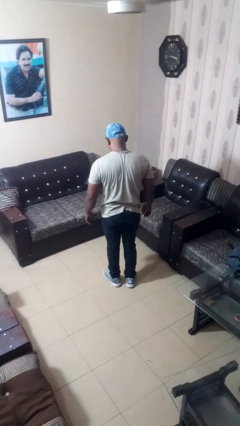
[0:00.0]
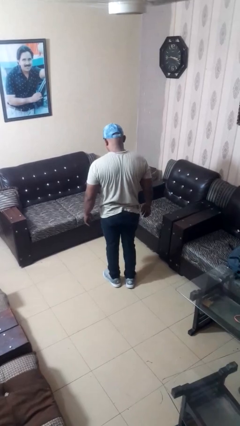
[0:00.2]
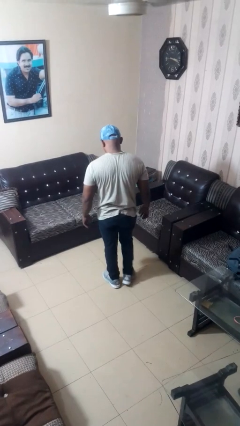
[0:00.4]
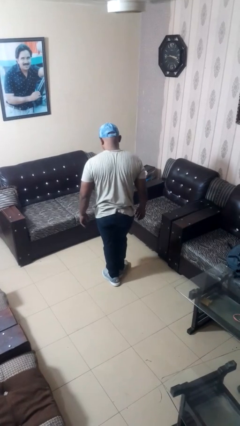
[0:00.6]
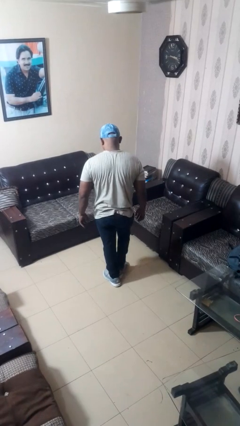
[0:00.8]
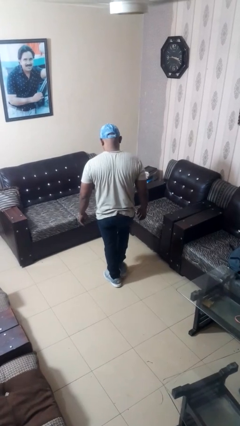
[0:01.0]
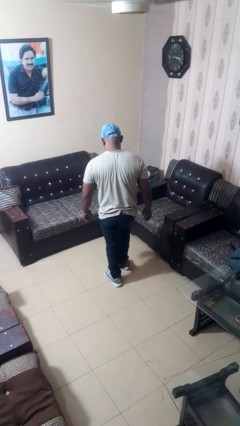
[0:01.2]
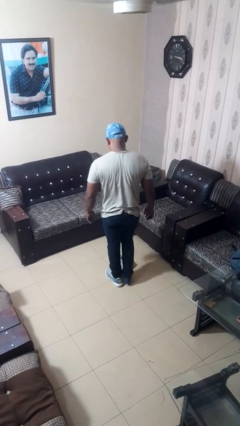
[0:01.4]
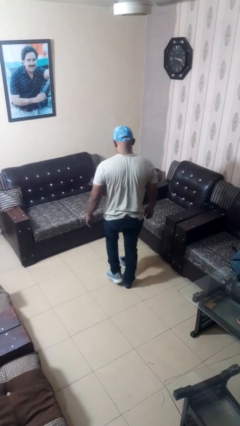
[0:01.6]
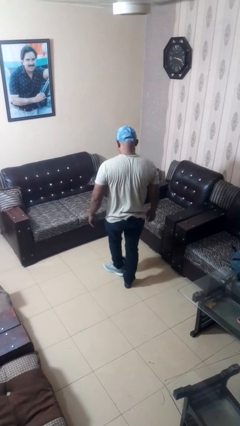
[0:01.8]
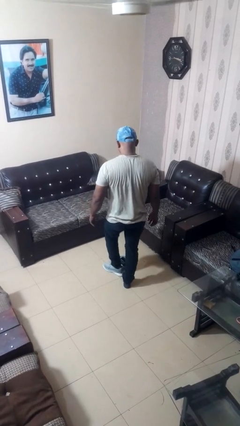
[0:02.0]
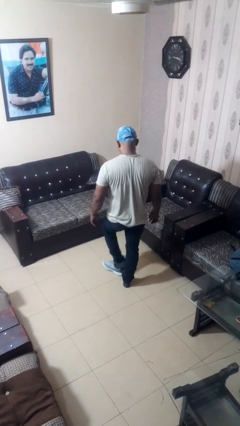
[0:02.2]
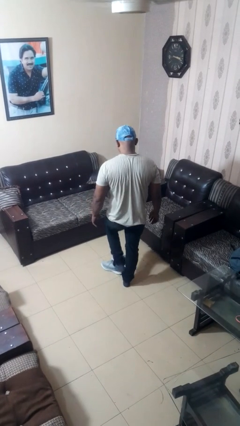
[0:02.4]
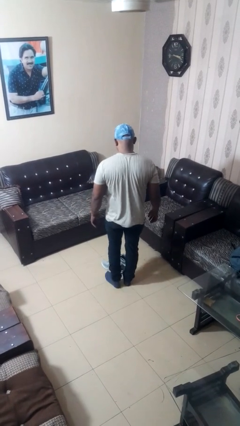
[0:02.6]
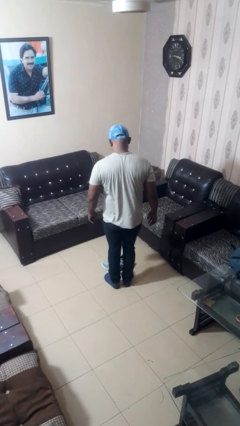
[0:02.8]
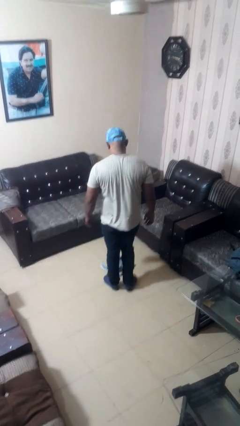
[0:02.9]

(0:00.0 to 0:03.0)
person takes off shoes

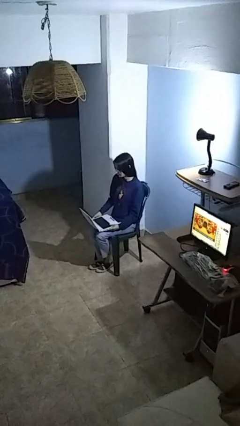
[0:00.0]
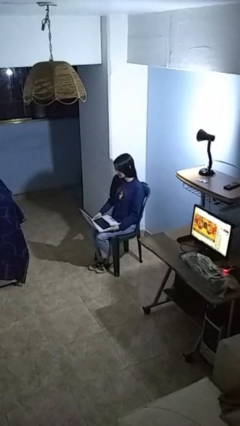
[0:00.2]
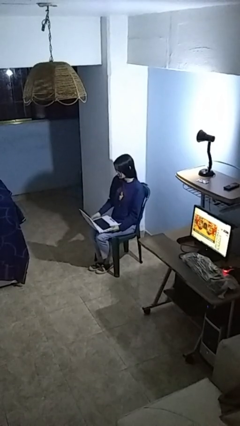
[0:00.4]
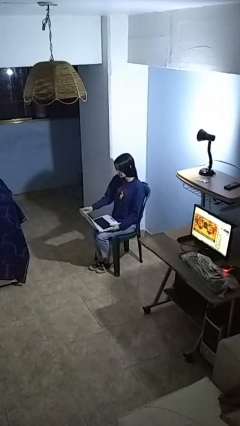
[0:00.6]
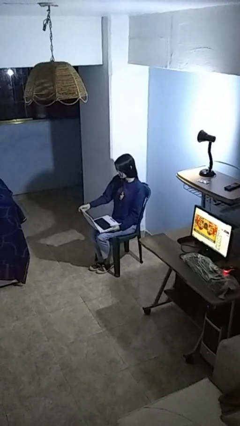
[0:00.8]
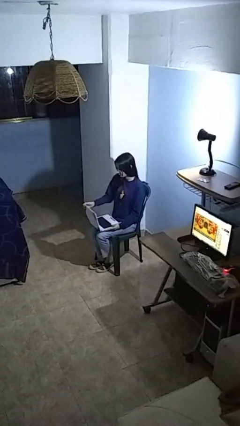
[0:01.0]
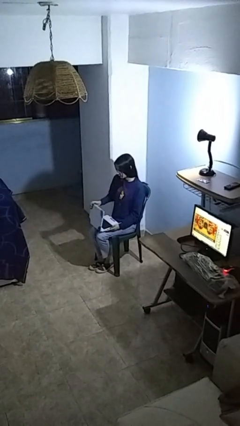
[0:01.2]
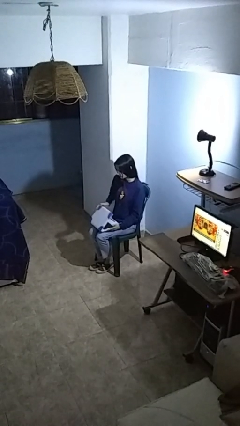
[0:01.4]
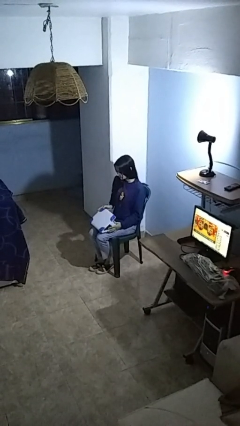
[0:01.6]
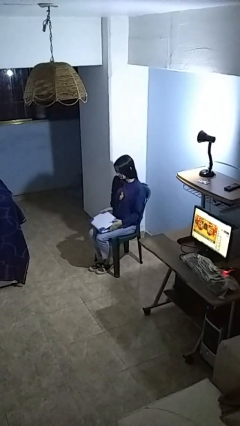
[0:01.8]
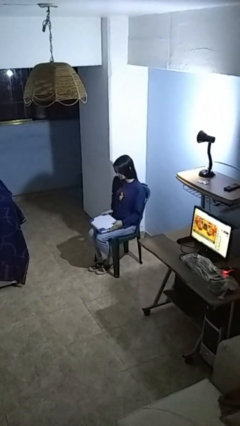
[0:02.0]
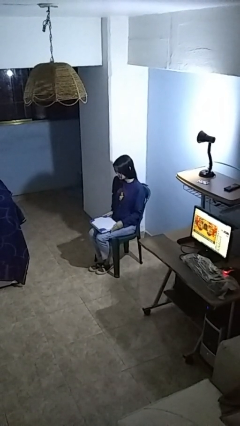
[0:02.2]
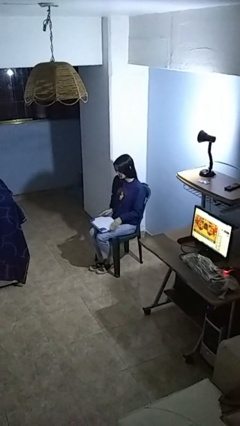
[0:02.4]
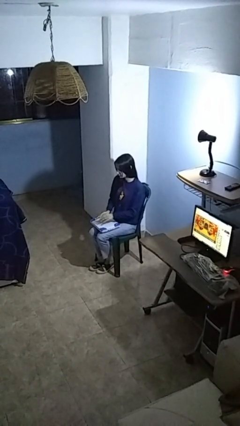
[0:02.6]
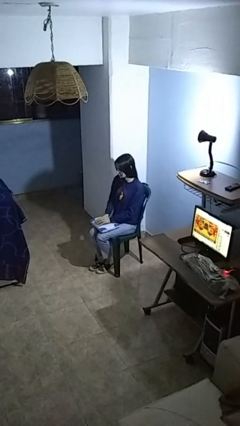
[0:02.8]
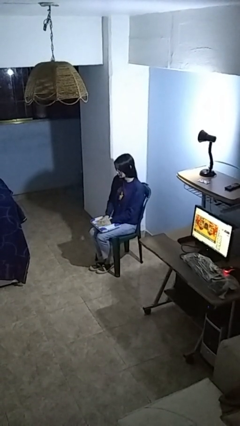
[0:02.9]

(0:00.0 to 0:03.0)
person closes laptop

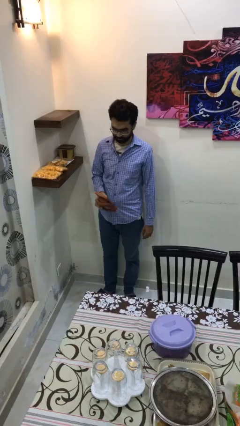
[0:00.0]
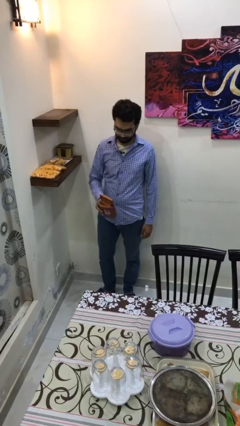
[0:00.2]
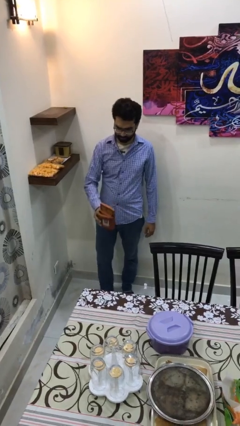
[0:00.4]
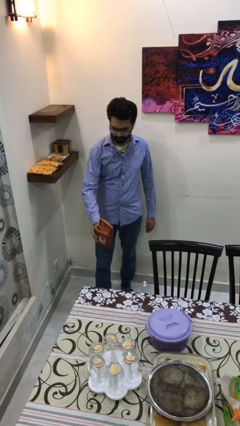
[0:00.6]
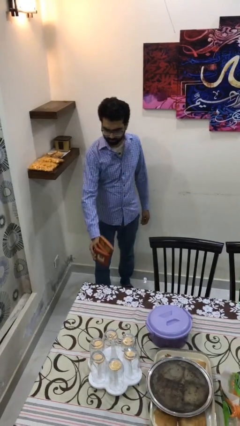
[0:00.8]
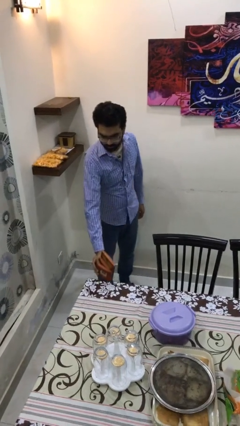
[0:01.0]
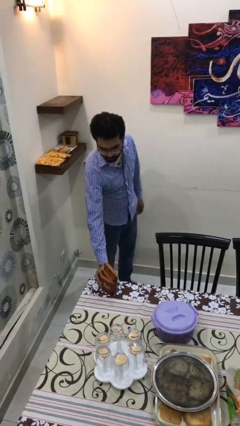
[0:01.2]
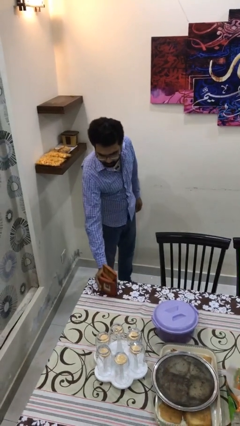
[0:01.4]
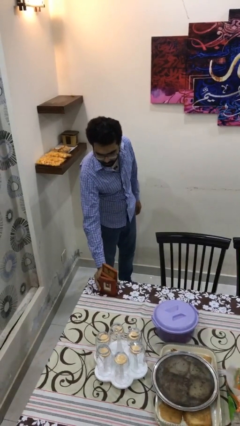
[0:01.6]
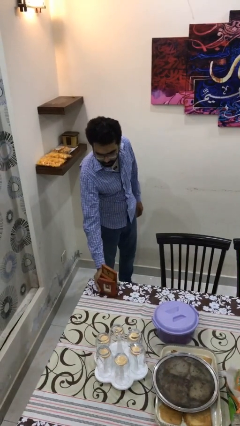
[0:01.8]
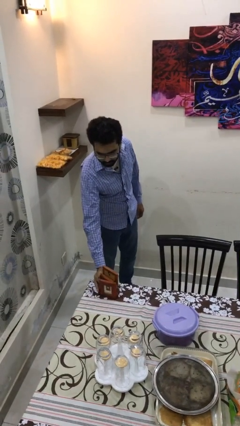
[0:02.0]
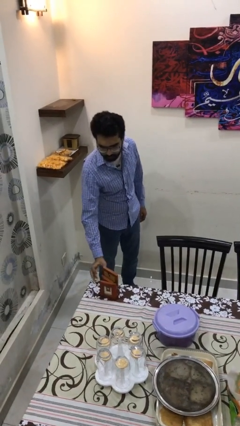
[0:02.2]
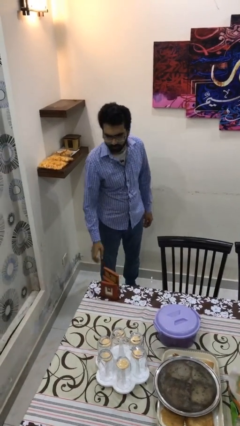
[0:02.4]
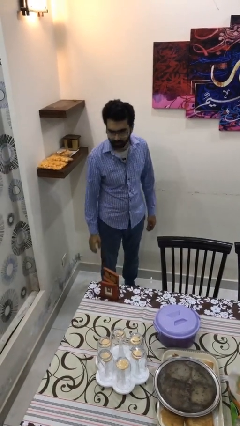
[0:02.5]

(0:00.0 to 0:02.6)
person puts down object on table

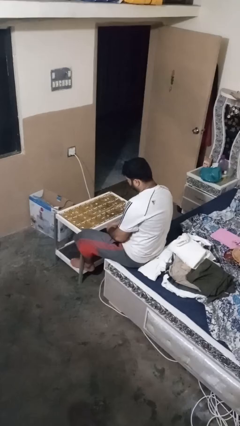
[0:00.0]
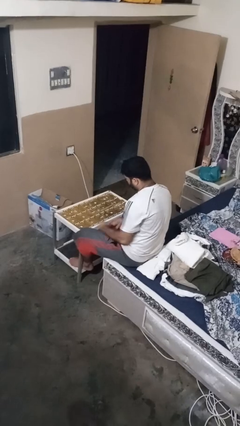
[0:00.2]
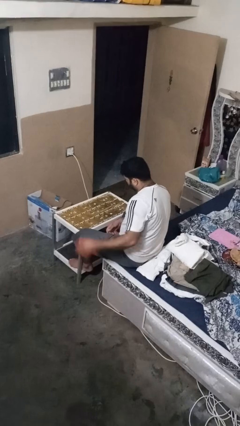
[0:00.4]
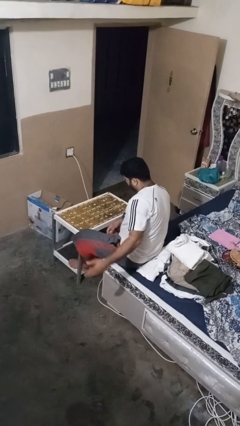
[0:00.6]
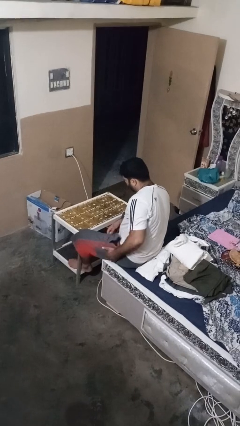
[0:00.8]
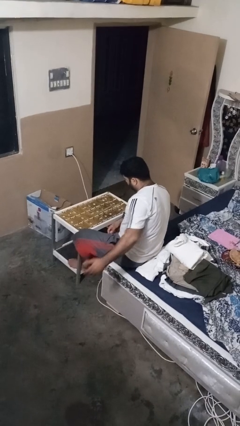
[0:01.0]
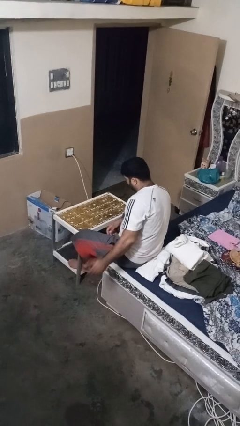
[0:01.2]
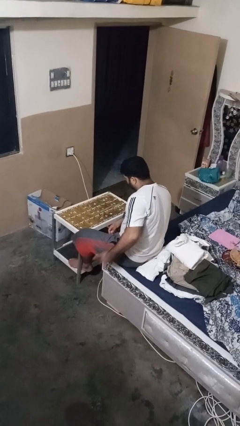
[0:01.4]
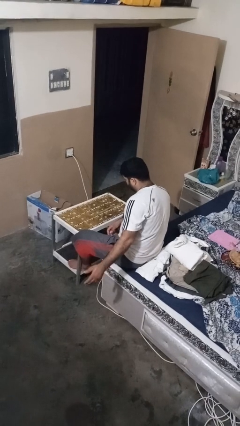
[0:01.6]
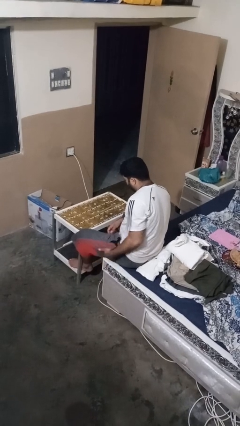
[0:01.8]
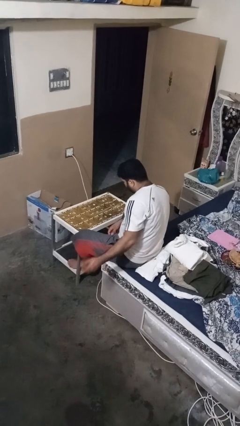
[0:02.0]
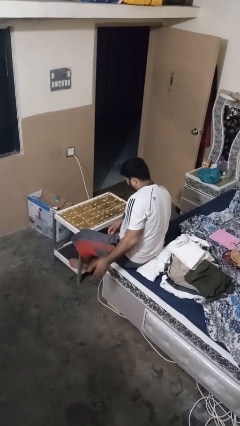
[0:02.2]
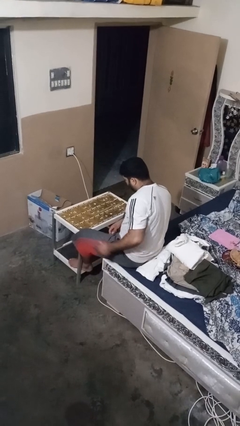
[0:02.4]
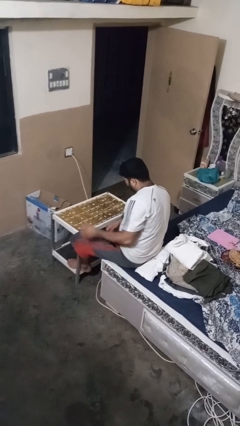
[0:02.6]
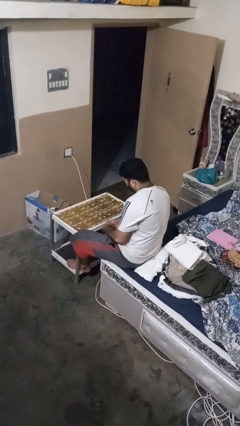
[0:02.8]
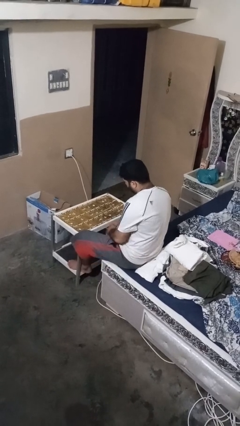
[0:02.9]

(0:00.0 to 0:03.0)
person slaps hands on thighs

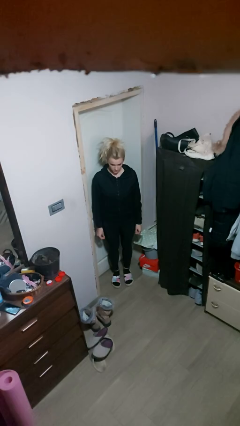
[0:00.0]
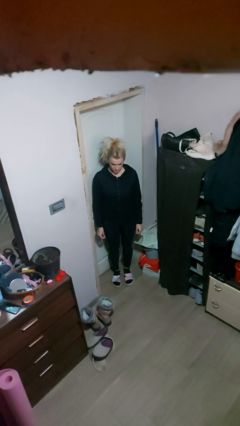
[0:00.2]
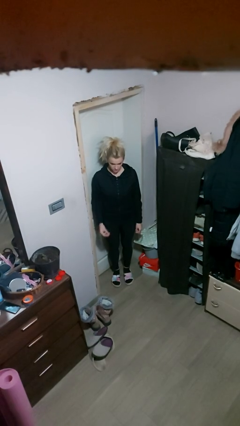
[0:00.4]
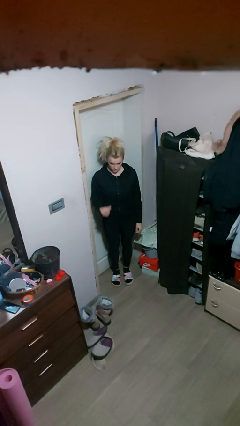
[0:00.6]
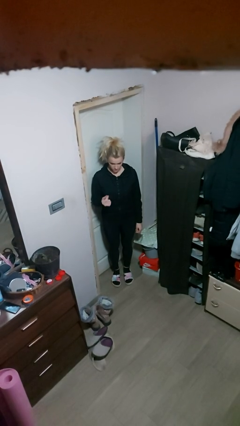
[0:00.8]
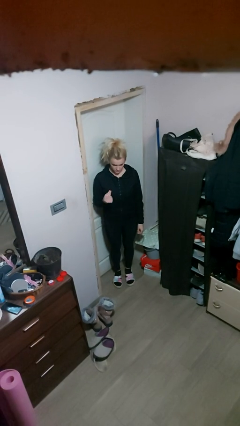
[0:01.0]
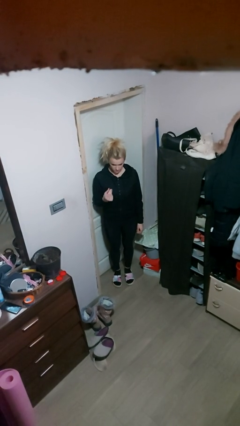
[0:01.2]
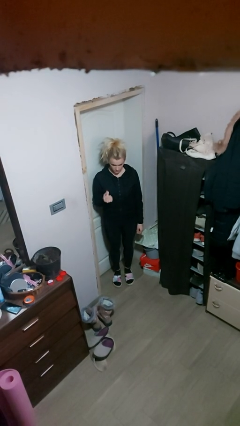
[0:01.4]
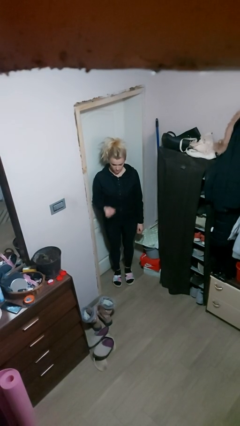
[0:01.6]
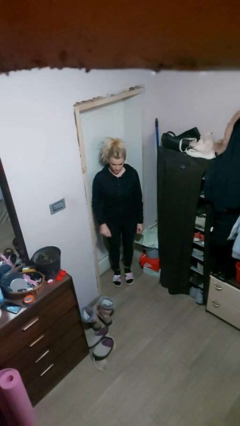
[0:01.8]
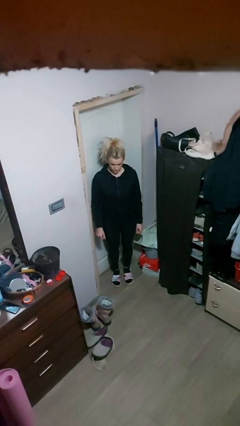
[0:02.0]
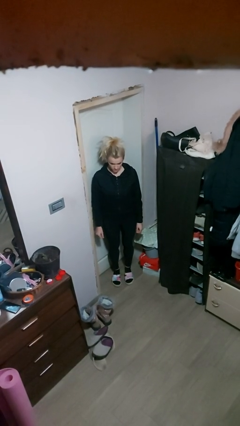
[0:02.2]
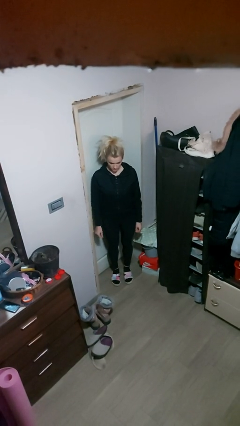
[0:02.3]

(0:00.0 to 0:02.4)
person snaps fingers

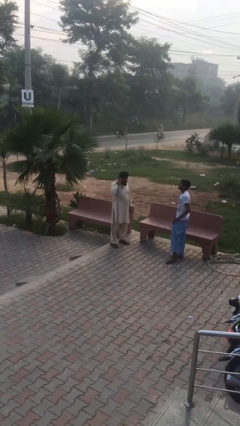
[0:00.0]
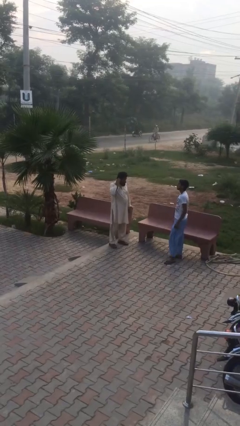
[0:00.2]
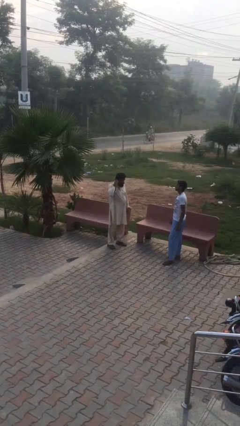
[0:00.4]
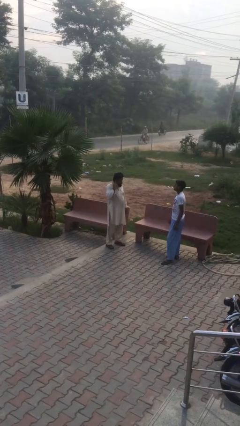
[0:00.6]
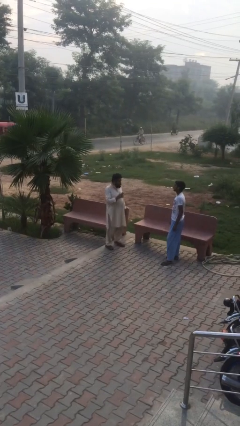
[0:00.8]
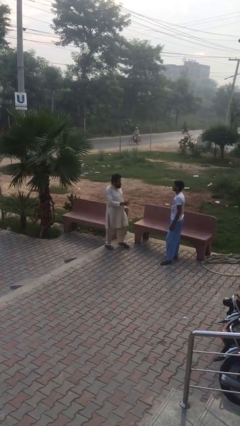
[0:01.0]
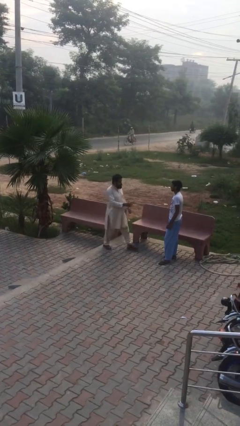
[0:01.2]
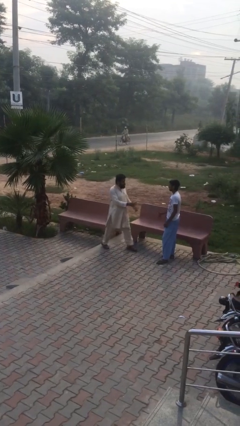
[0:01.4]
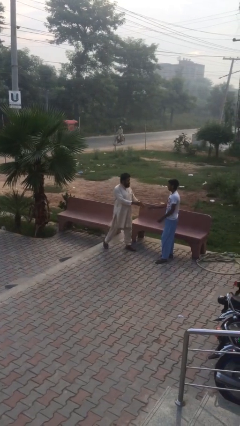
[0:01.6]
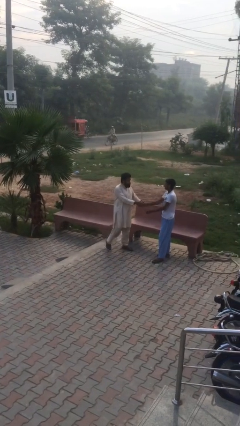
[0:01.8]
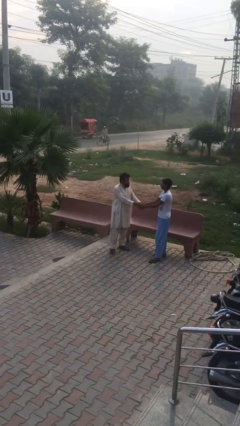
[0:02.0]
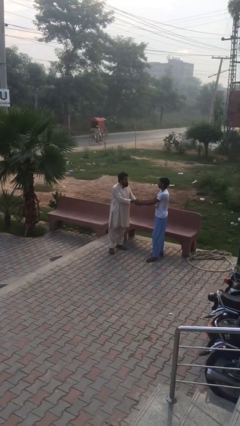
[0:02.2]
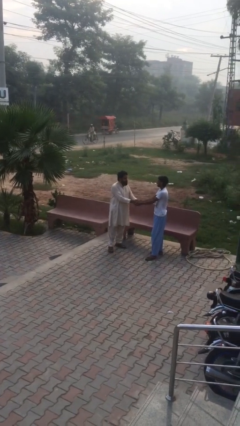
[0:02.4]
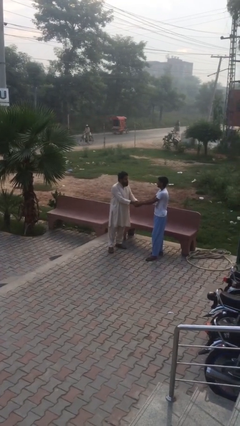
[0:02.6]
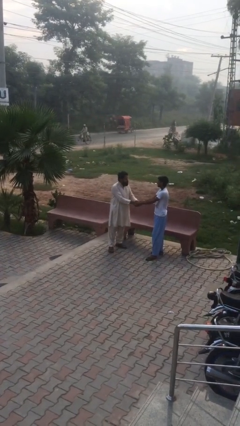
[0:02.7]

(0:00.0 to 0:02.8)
person shakes hand

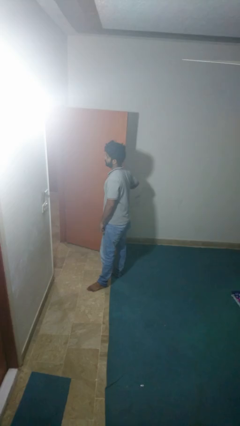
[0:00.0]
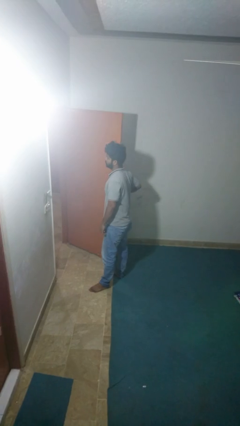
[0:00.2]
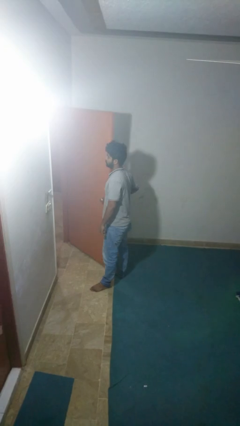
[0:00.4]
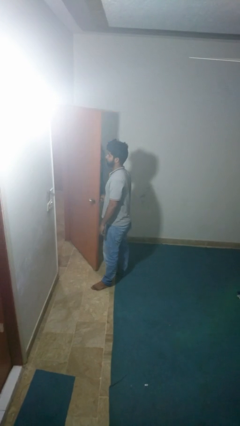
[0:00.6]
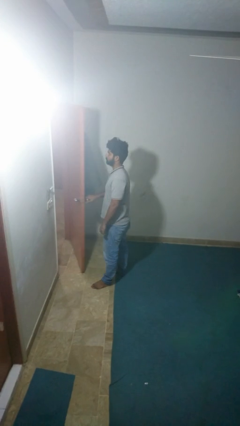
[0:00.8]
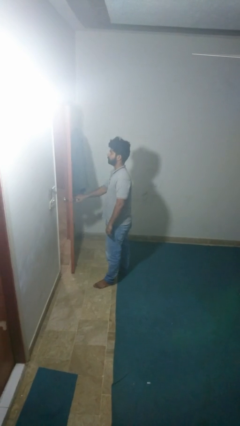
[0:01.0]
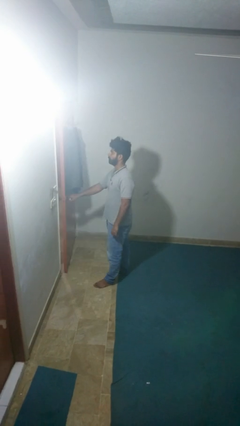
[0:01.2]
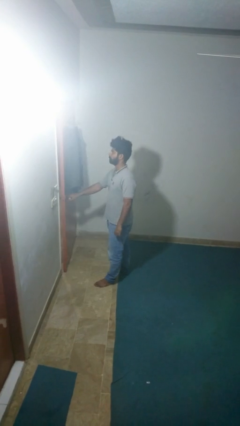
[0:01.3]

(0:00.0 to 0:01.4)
person closes facility door
